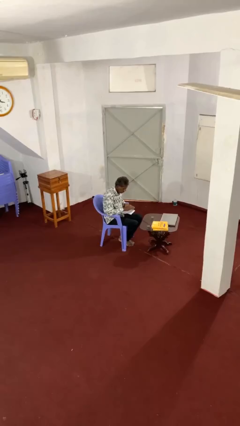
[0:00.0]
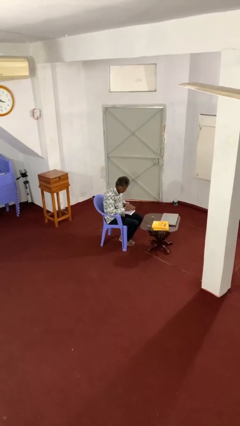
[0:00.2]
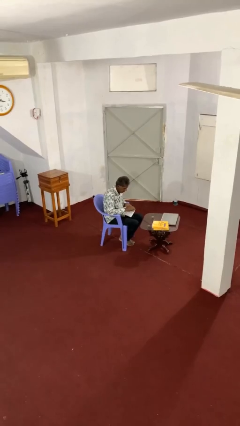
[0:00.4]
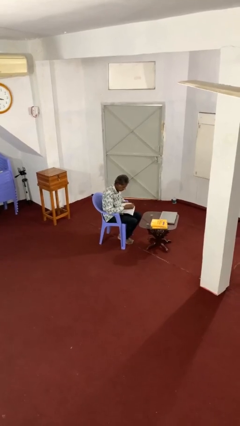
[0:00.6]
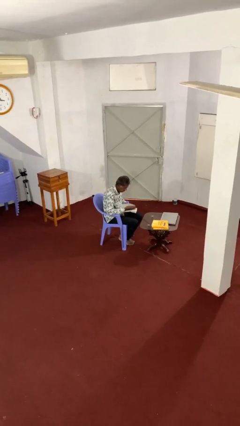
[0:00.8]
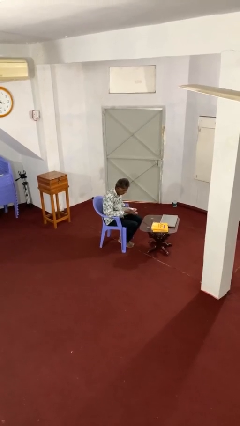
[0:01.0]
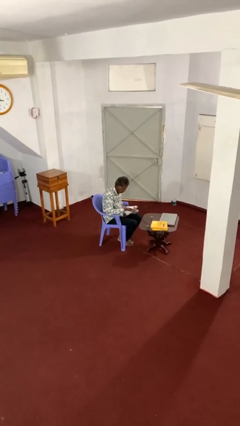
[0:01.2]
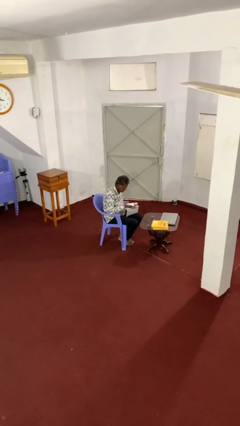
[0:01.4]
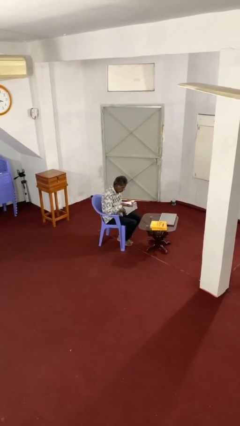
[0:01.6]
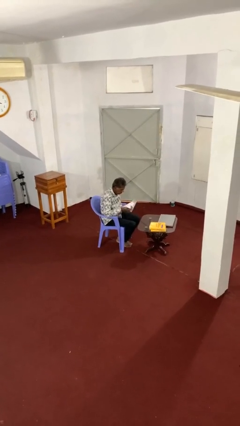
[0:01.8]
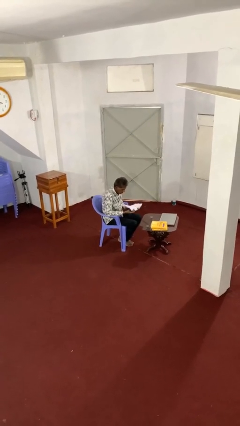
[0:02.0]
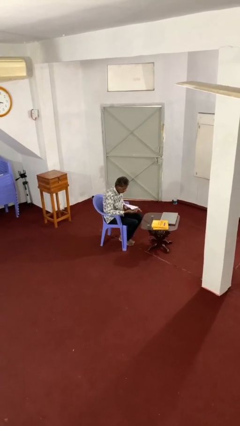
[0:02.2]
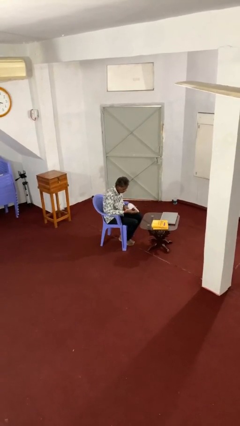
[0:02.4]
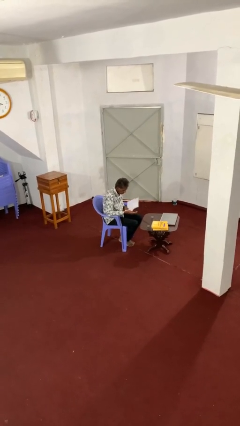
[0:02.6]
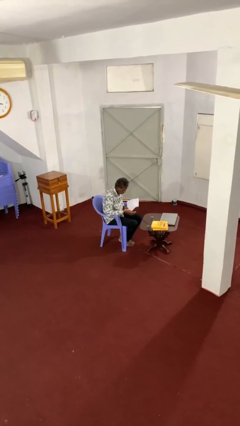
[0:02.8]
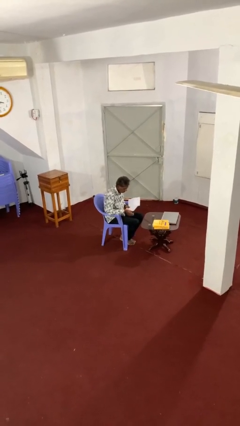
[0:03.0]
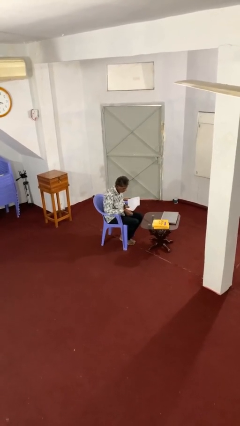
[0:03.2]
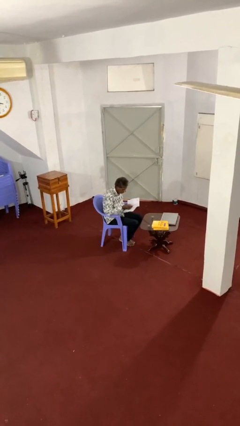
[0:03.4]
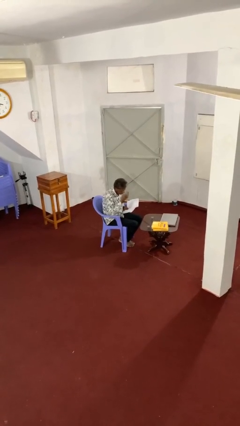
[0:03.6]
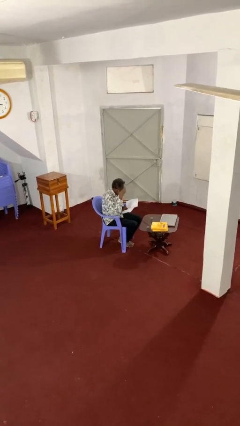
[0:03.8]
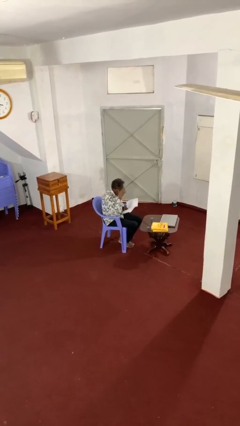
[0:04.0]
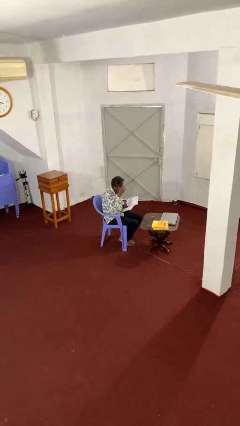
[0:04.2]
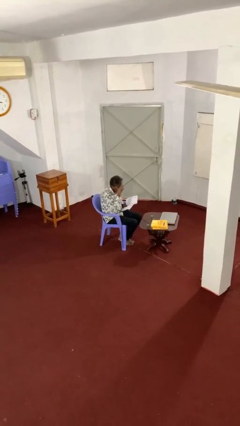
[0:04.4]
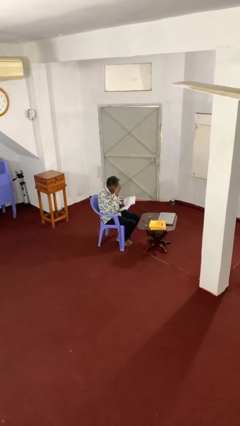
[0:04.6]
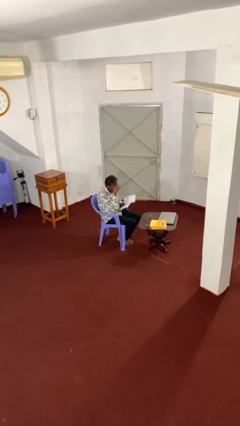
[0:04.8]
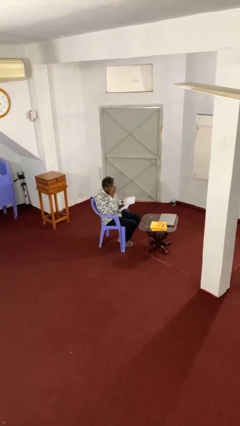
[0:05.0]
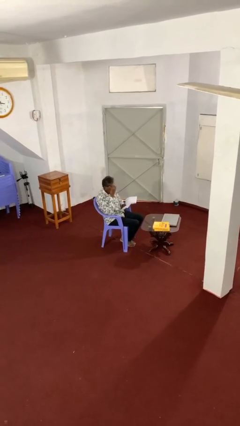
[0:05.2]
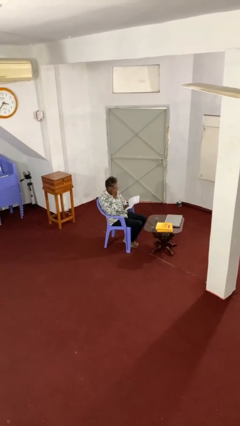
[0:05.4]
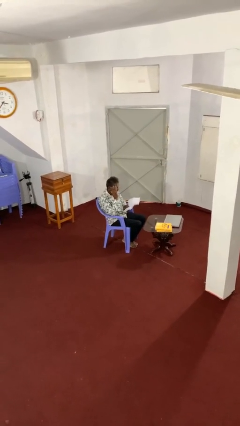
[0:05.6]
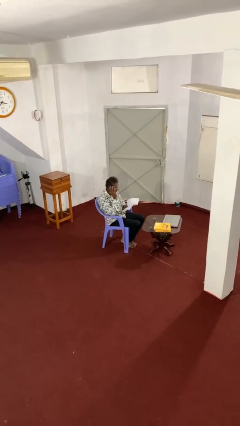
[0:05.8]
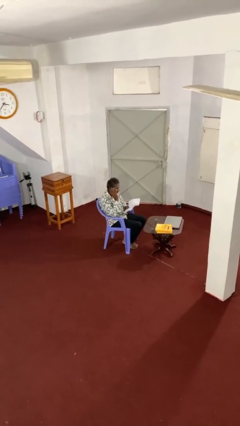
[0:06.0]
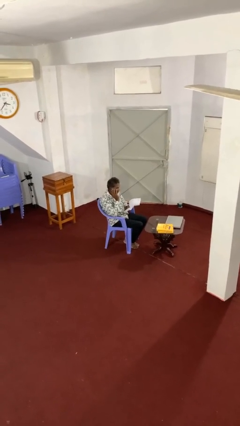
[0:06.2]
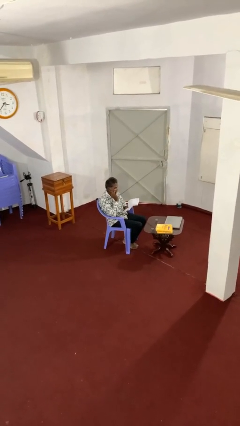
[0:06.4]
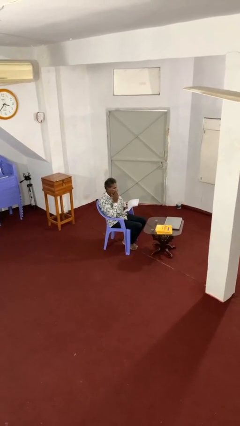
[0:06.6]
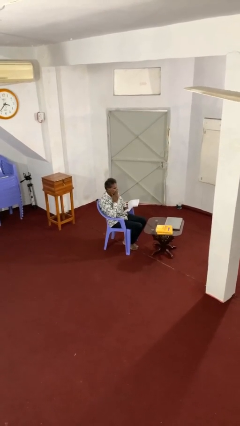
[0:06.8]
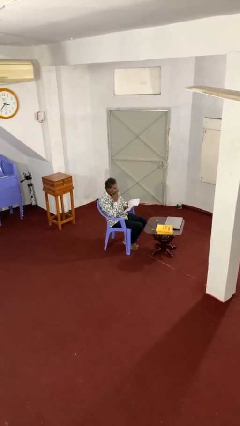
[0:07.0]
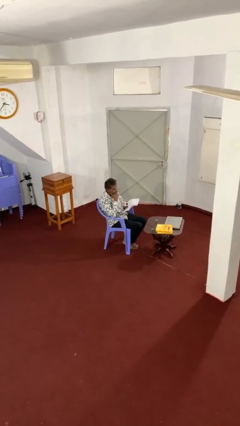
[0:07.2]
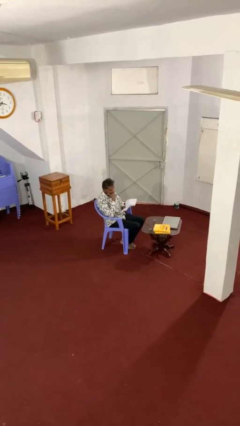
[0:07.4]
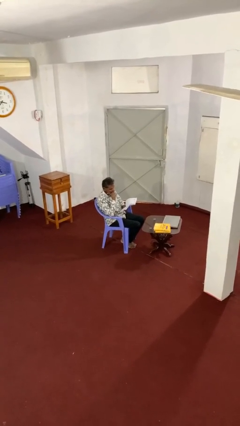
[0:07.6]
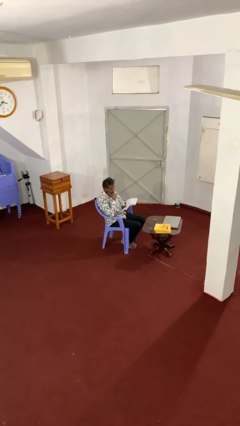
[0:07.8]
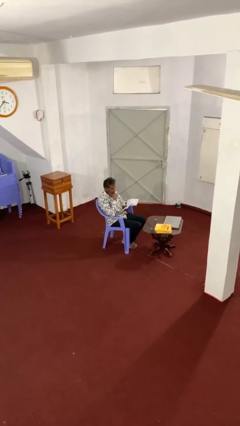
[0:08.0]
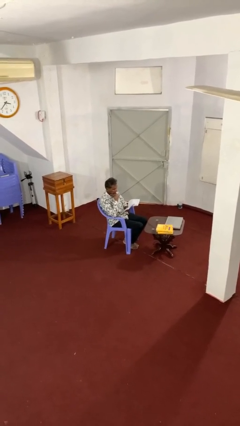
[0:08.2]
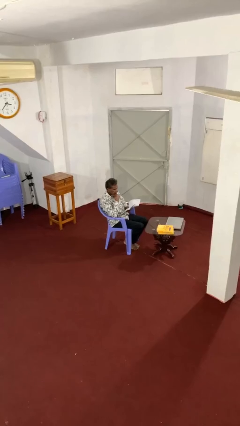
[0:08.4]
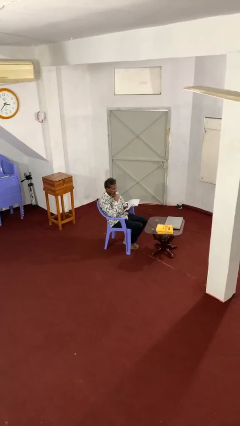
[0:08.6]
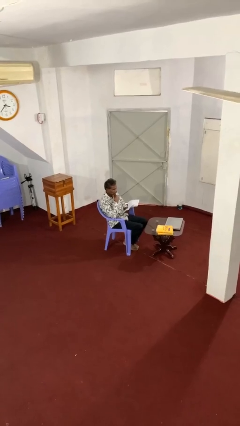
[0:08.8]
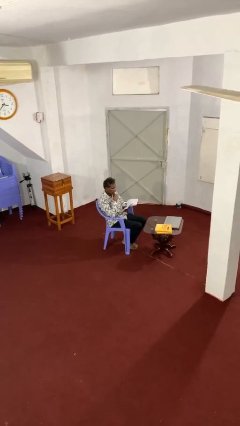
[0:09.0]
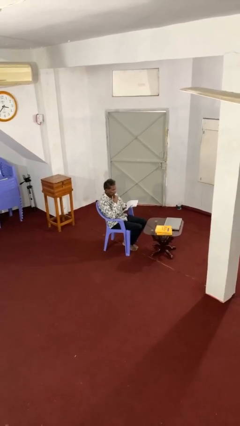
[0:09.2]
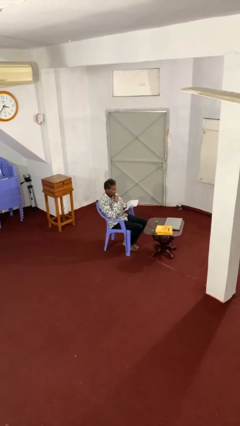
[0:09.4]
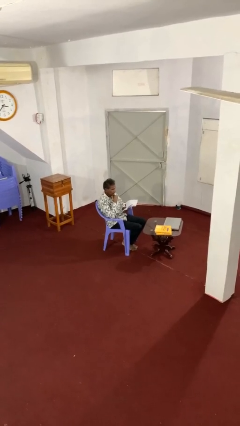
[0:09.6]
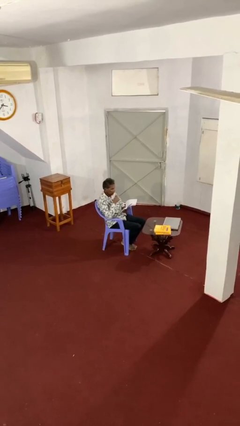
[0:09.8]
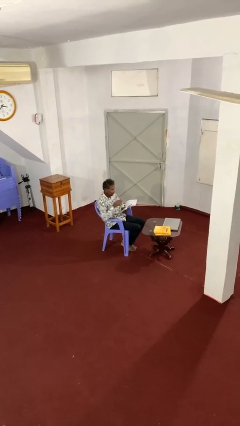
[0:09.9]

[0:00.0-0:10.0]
person reads document

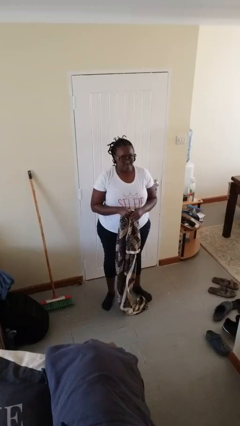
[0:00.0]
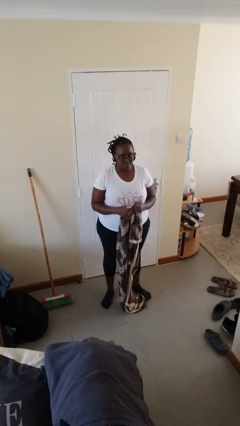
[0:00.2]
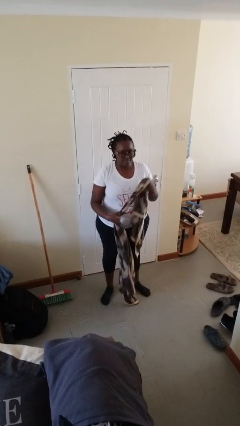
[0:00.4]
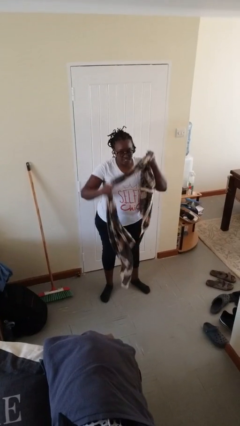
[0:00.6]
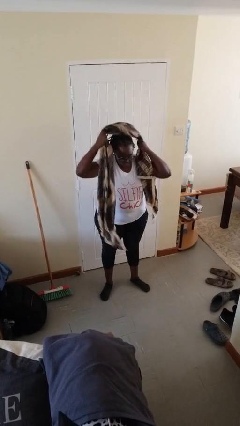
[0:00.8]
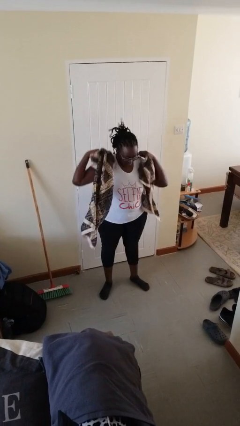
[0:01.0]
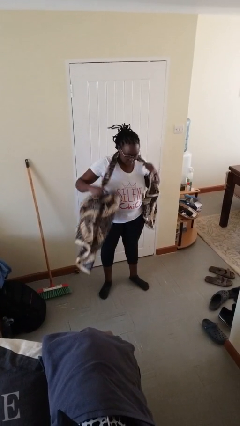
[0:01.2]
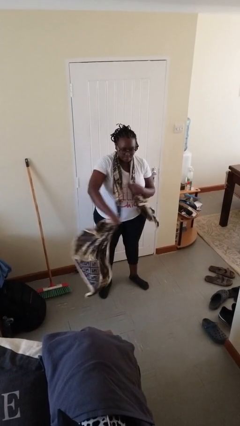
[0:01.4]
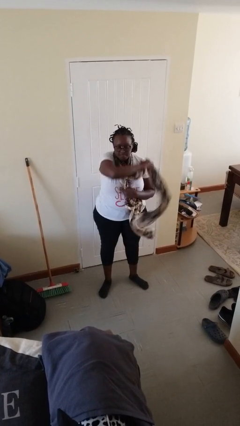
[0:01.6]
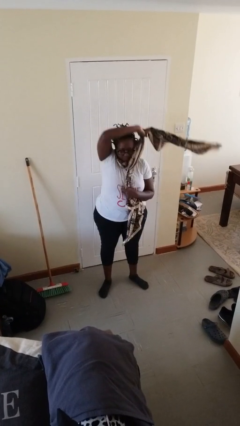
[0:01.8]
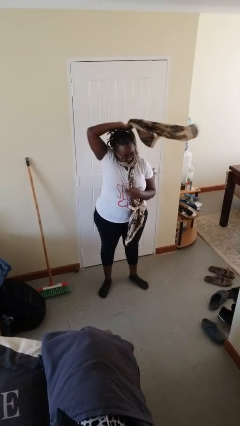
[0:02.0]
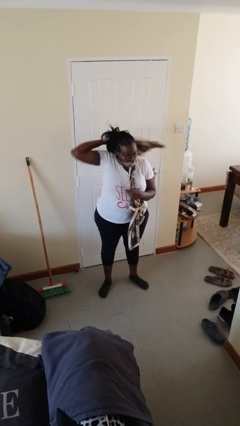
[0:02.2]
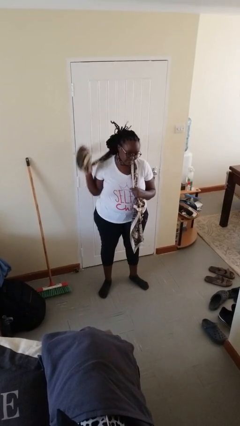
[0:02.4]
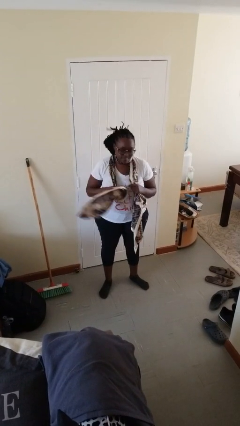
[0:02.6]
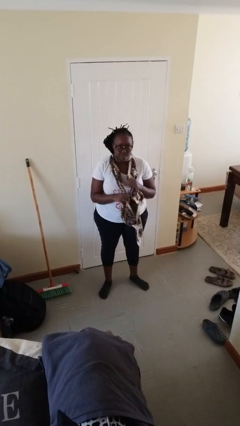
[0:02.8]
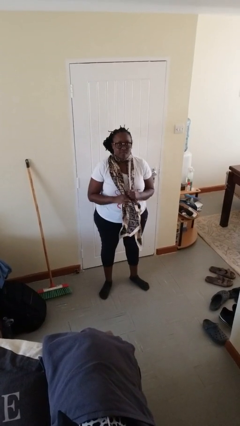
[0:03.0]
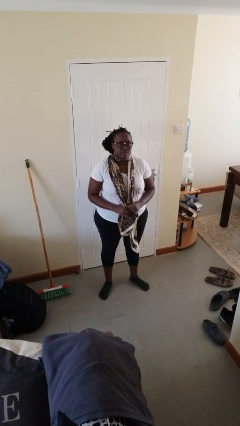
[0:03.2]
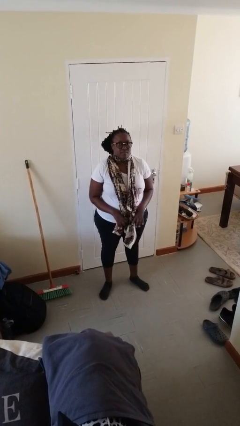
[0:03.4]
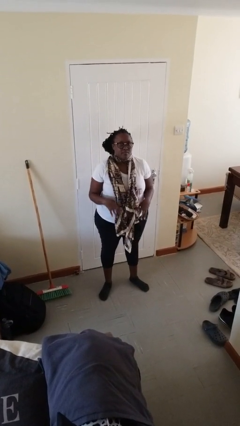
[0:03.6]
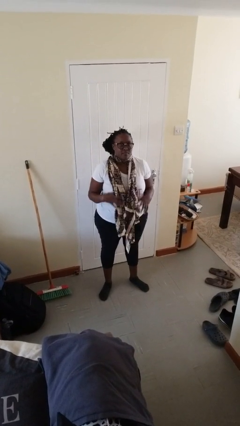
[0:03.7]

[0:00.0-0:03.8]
person puts on scarf

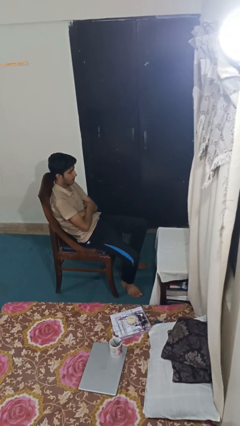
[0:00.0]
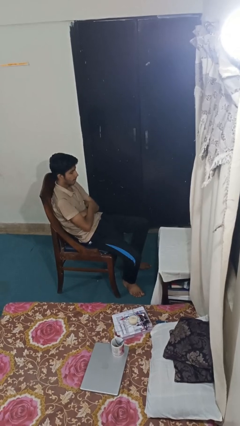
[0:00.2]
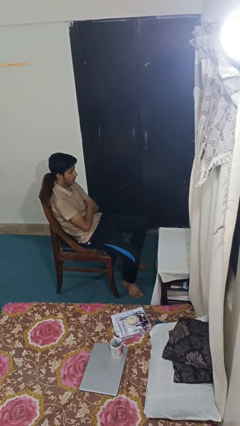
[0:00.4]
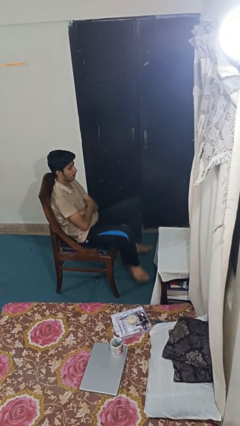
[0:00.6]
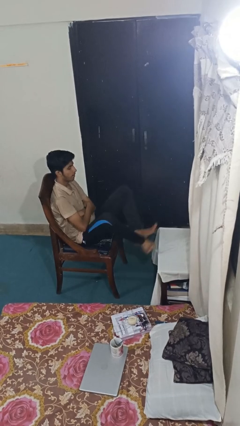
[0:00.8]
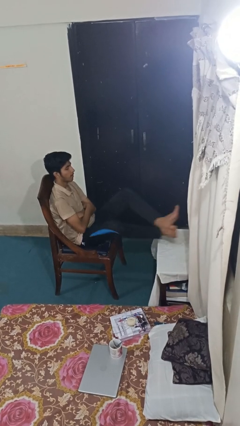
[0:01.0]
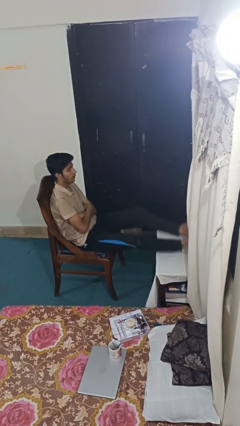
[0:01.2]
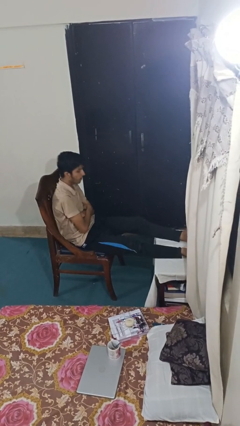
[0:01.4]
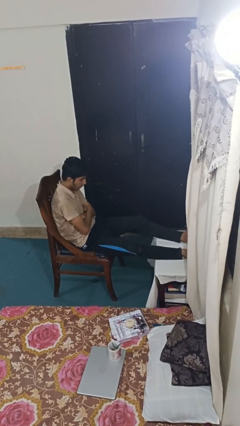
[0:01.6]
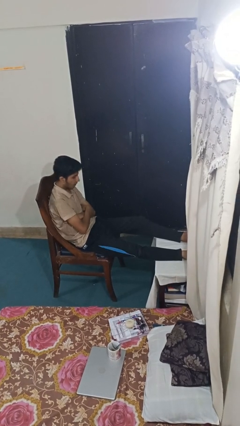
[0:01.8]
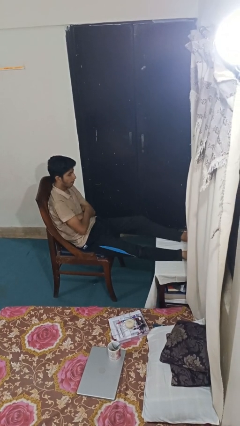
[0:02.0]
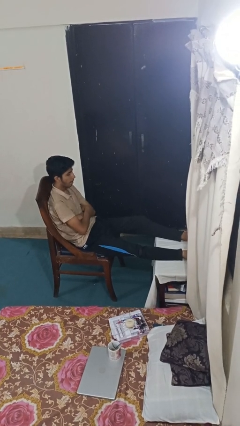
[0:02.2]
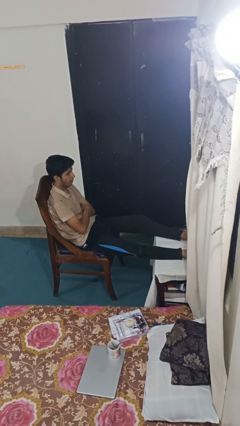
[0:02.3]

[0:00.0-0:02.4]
person puts feet up

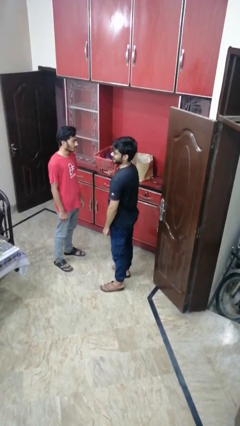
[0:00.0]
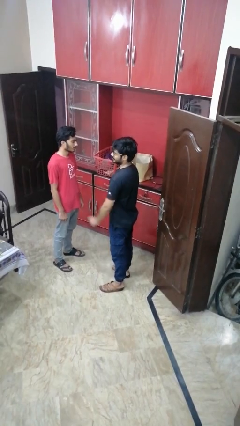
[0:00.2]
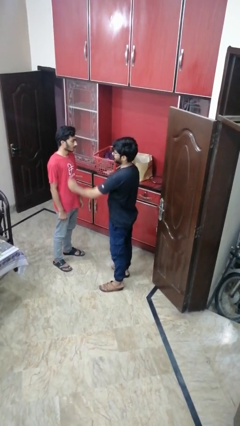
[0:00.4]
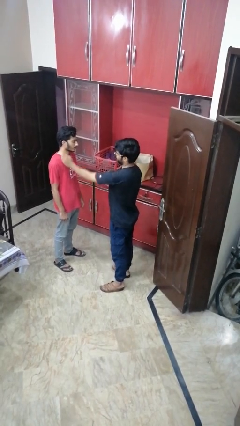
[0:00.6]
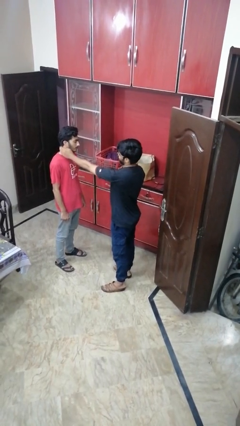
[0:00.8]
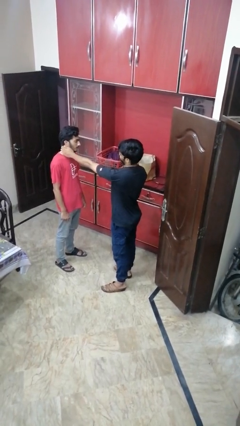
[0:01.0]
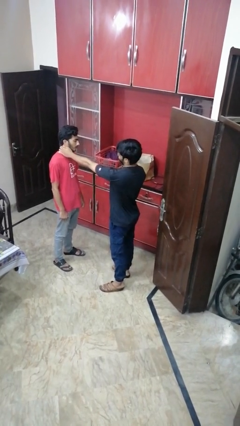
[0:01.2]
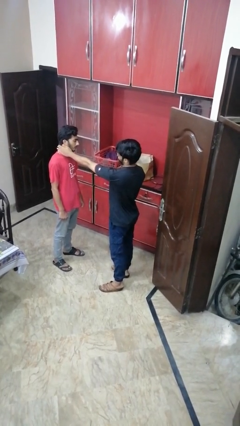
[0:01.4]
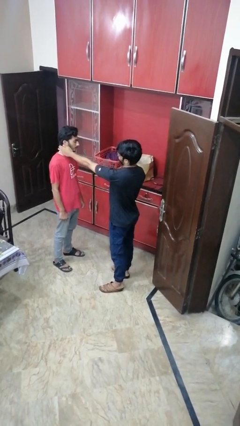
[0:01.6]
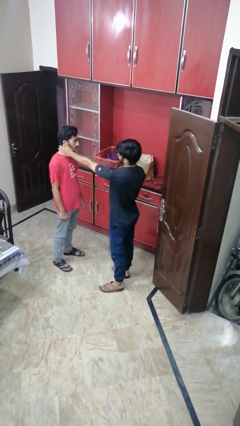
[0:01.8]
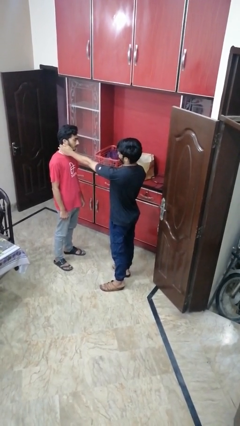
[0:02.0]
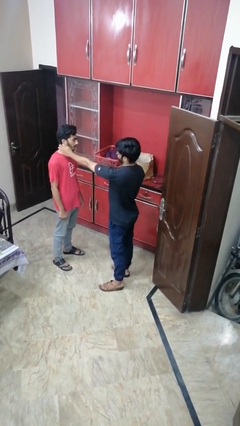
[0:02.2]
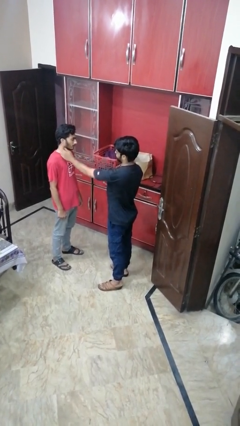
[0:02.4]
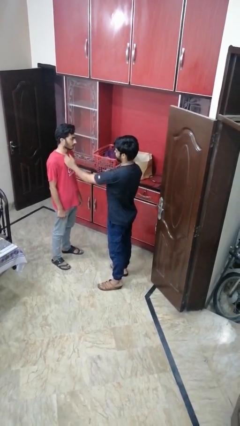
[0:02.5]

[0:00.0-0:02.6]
person touches face of person
